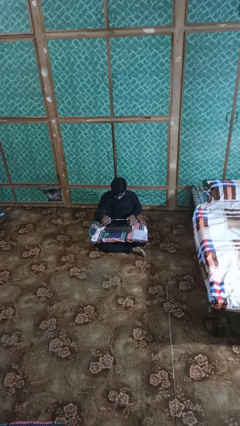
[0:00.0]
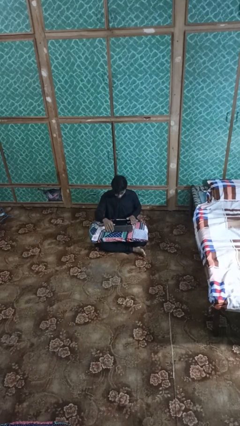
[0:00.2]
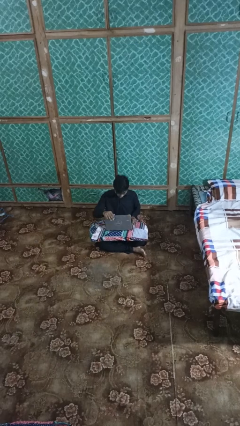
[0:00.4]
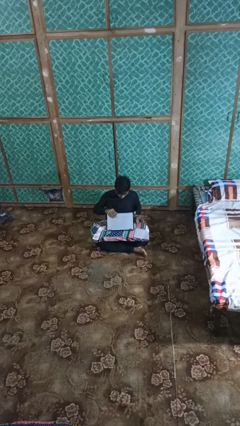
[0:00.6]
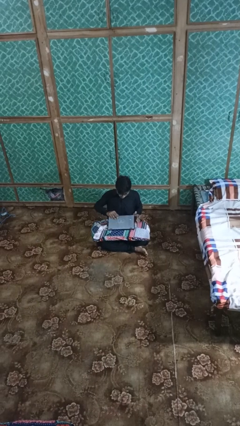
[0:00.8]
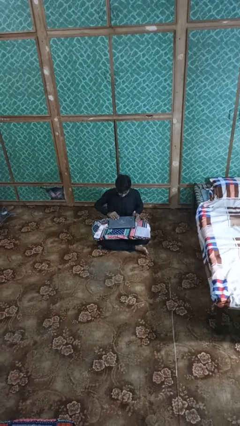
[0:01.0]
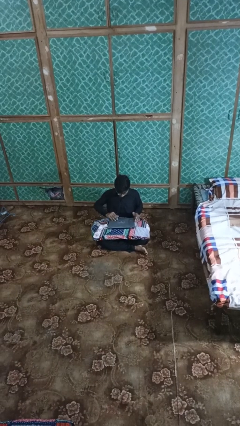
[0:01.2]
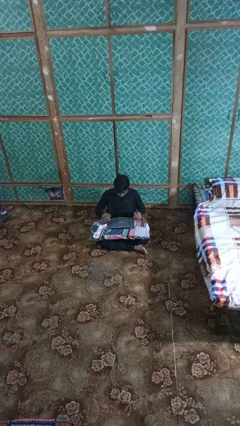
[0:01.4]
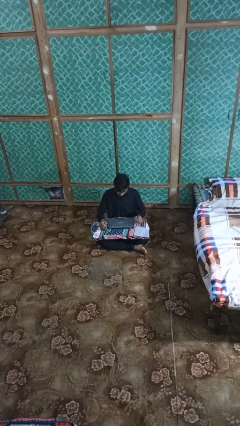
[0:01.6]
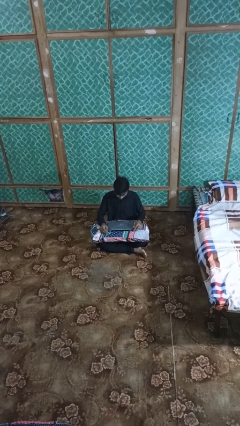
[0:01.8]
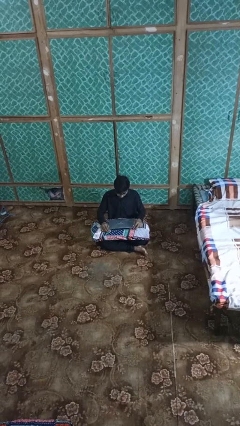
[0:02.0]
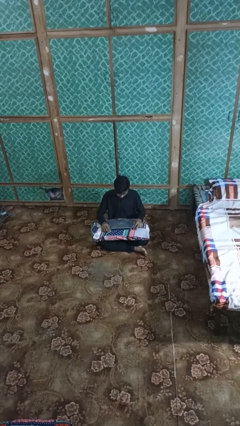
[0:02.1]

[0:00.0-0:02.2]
person closes laptop

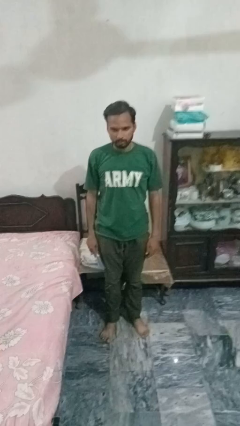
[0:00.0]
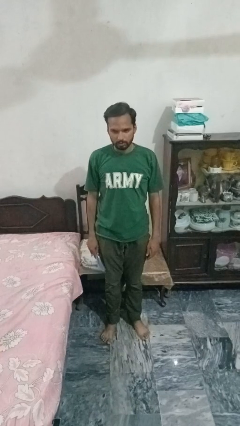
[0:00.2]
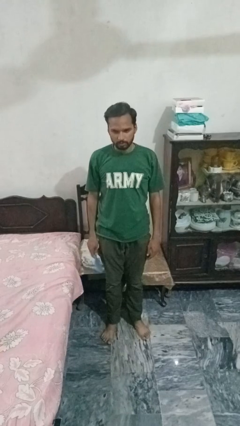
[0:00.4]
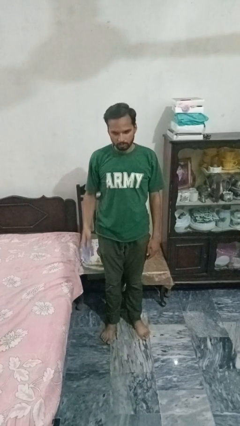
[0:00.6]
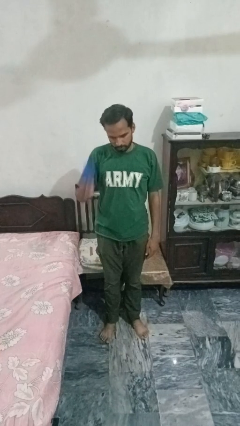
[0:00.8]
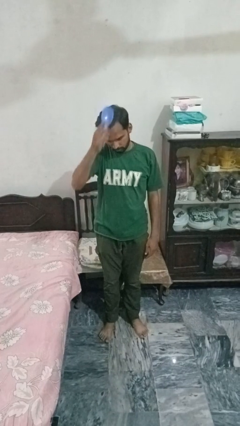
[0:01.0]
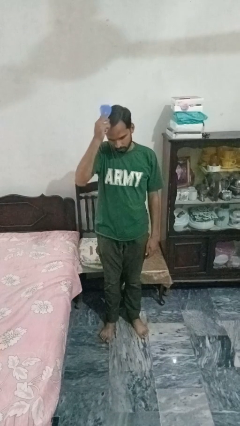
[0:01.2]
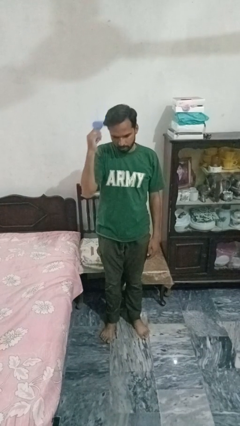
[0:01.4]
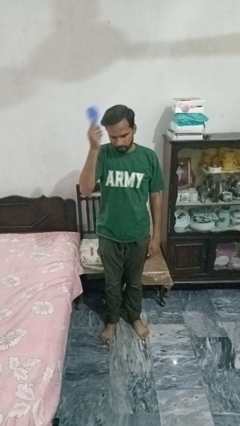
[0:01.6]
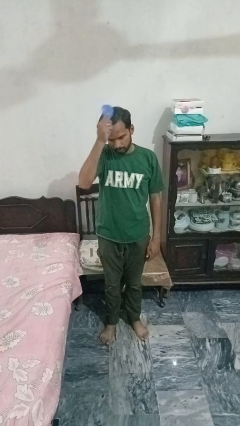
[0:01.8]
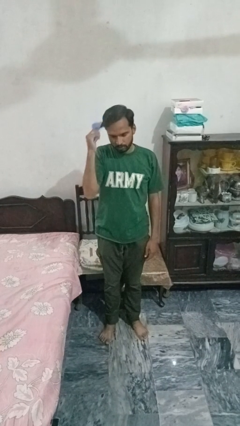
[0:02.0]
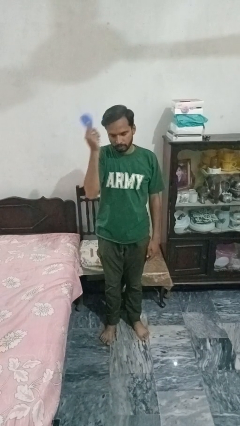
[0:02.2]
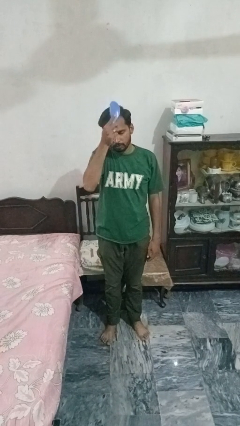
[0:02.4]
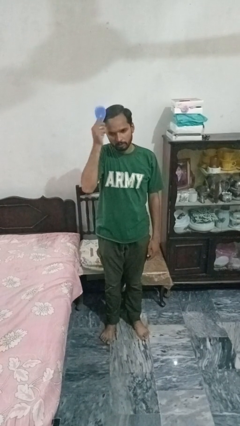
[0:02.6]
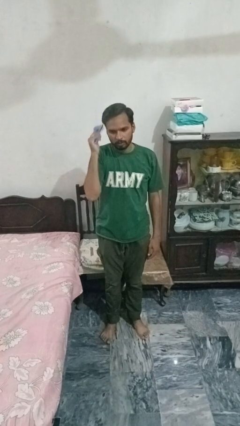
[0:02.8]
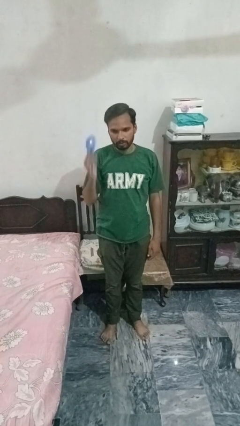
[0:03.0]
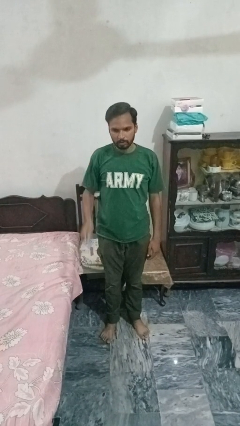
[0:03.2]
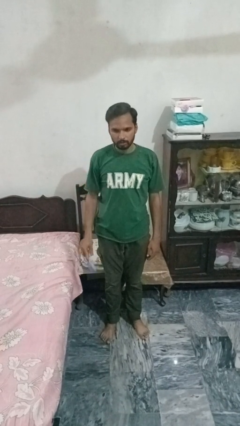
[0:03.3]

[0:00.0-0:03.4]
person brushes hair

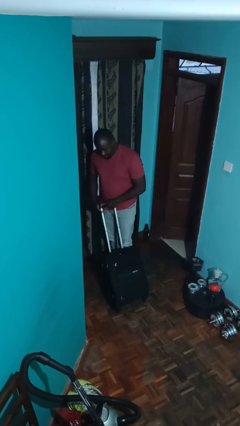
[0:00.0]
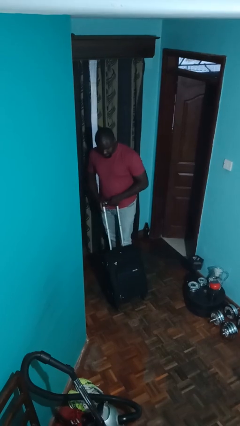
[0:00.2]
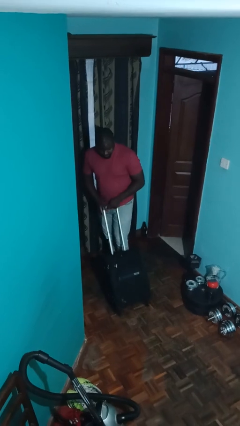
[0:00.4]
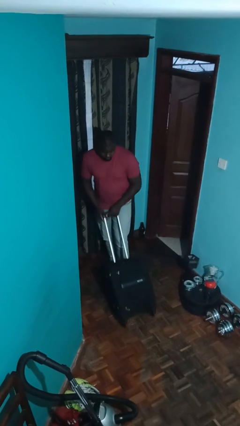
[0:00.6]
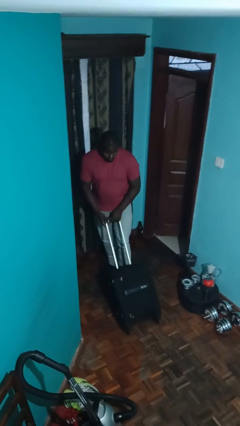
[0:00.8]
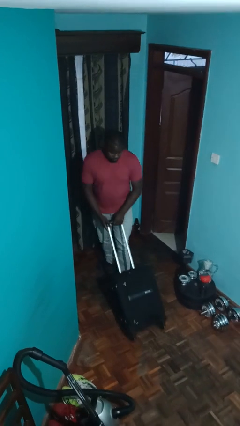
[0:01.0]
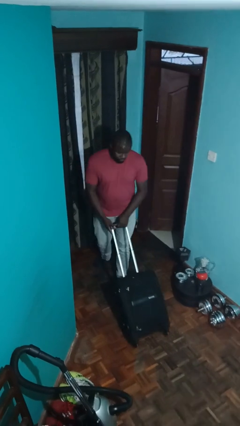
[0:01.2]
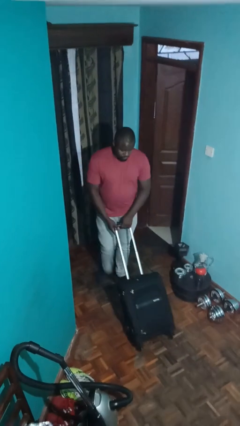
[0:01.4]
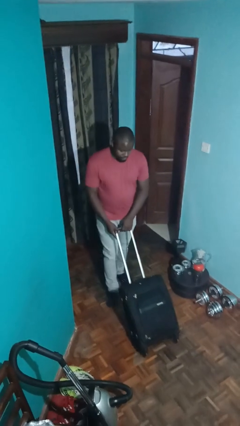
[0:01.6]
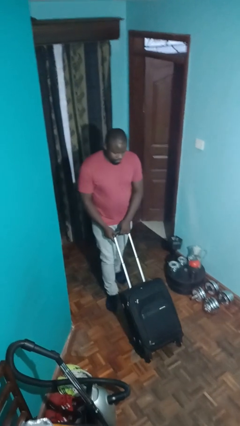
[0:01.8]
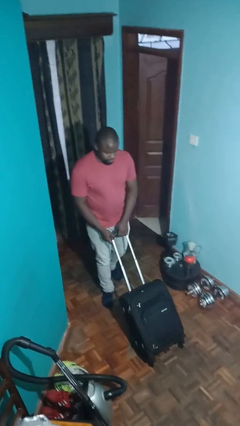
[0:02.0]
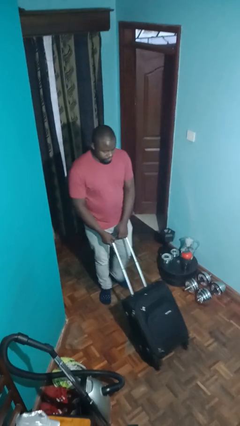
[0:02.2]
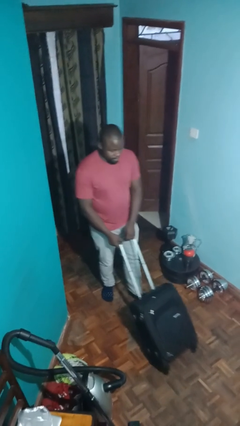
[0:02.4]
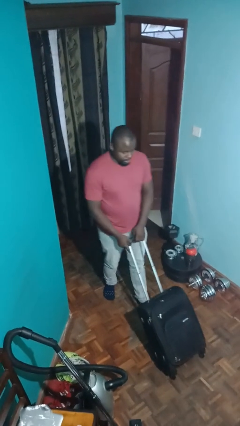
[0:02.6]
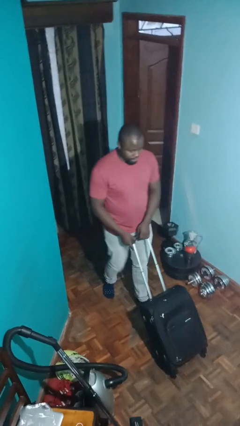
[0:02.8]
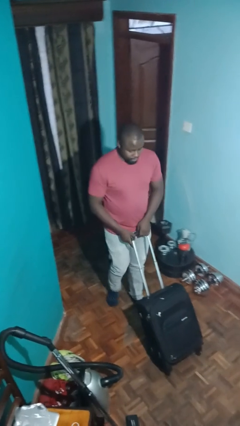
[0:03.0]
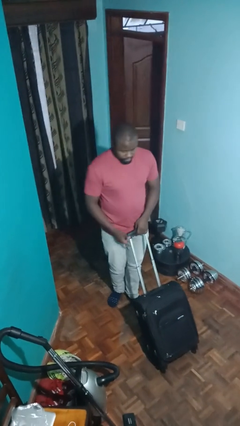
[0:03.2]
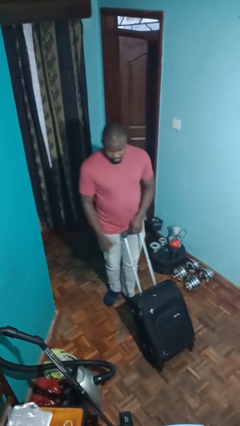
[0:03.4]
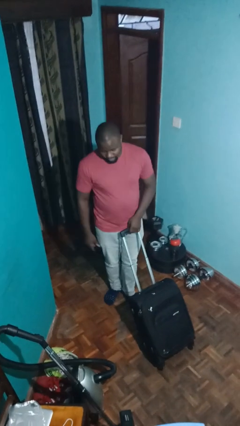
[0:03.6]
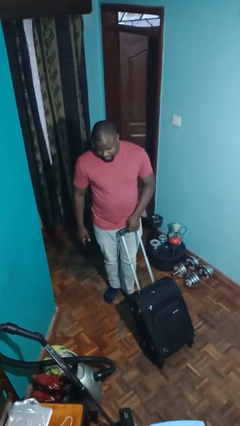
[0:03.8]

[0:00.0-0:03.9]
person pushes wheeled cart

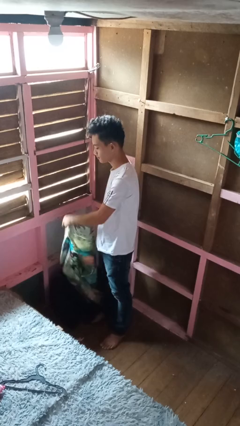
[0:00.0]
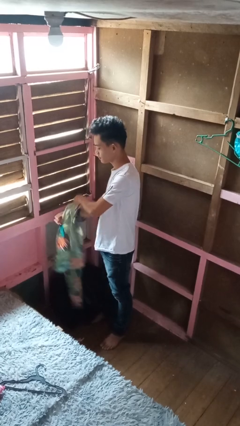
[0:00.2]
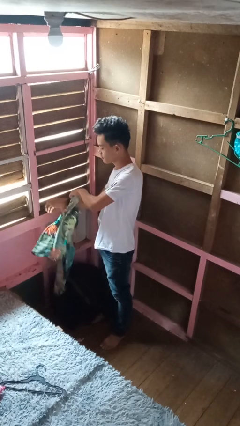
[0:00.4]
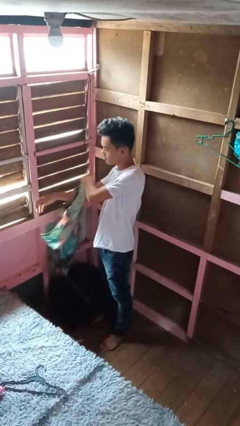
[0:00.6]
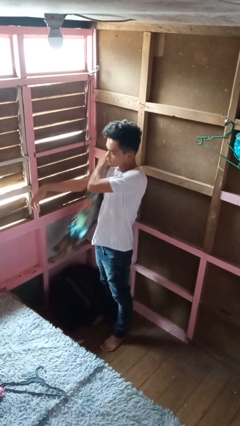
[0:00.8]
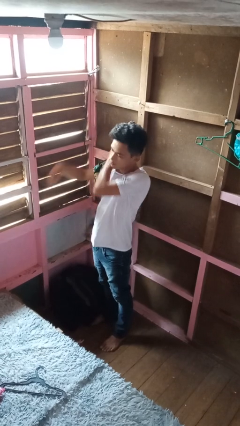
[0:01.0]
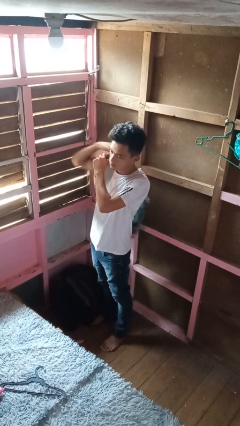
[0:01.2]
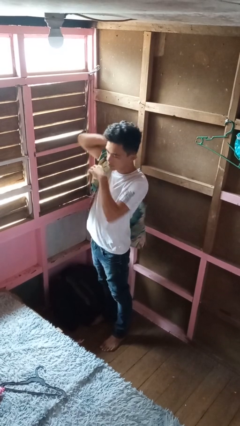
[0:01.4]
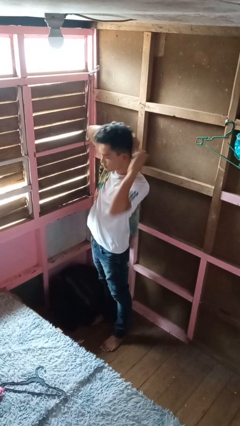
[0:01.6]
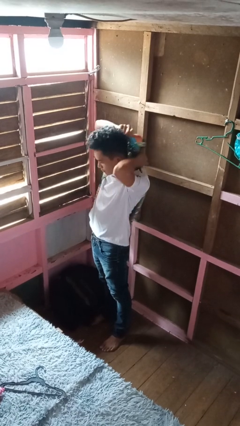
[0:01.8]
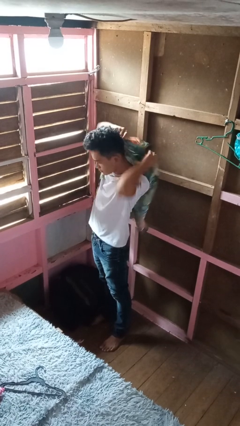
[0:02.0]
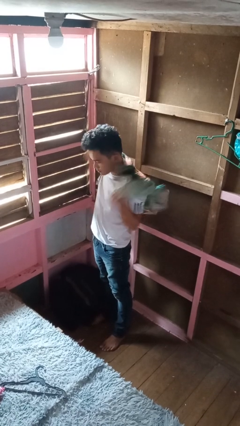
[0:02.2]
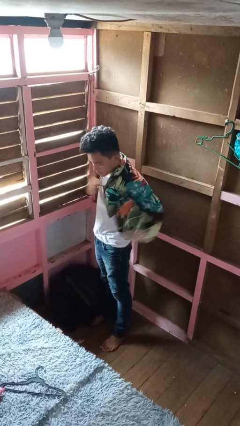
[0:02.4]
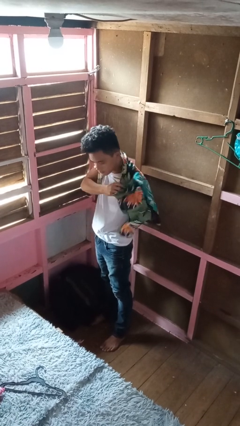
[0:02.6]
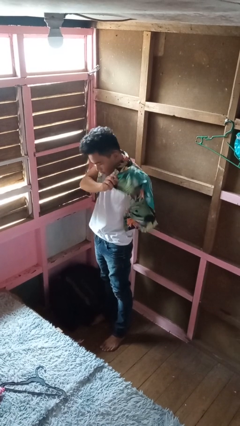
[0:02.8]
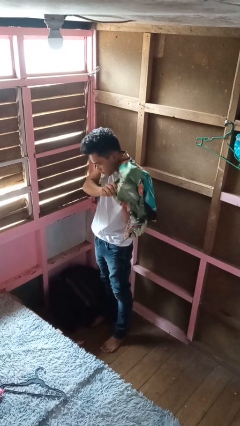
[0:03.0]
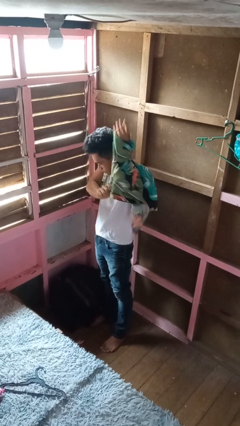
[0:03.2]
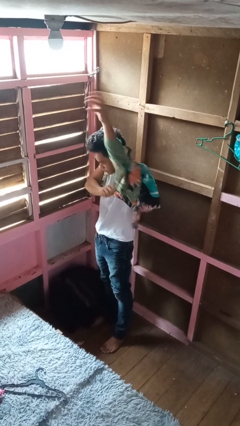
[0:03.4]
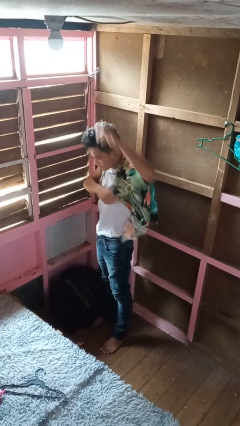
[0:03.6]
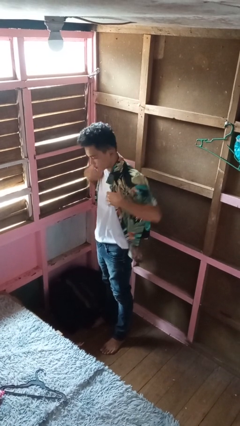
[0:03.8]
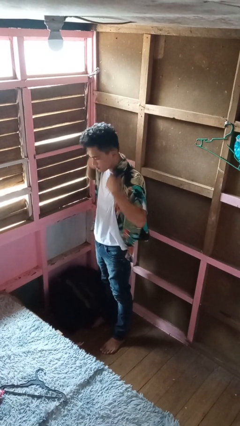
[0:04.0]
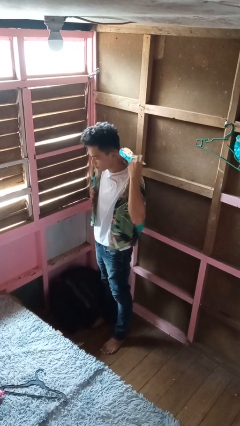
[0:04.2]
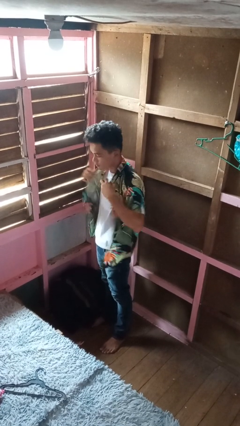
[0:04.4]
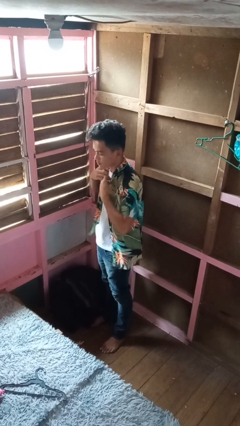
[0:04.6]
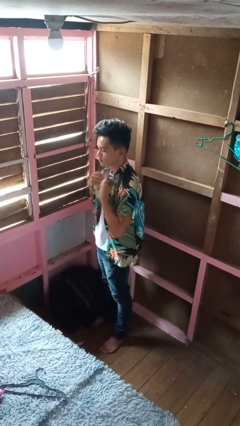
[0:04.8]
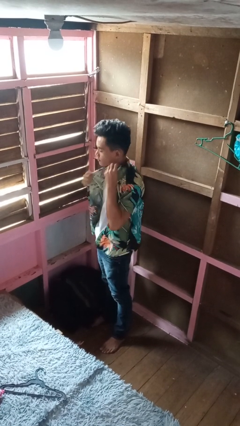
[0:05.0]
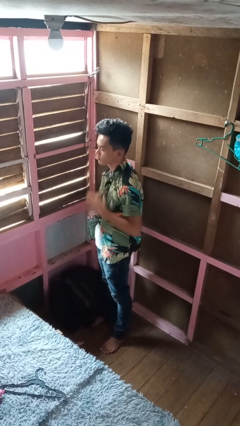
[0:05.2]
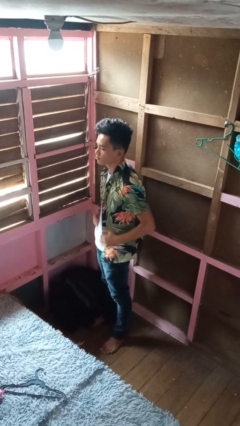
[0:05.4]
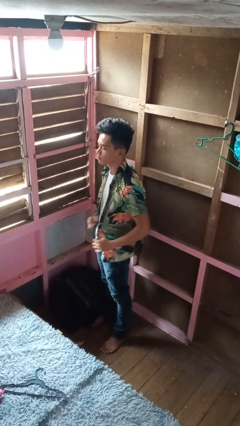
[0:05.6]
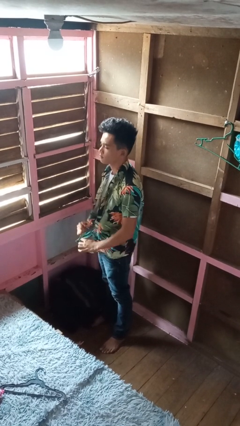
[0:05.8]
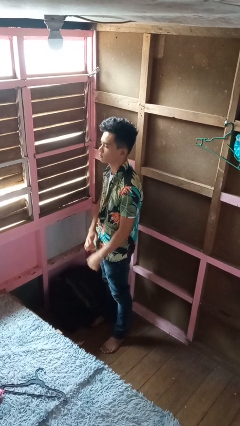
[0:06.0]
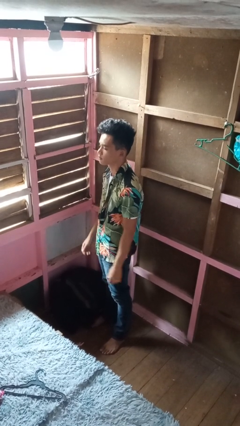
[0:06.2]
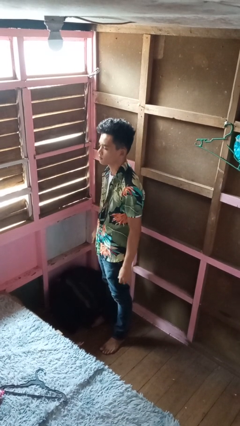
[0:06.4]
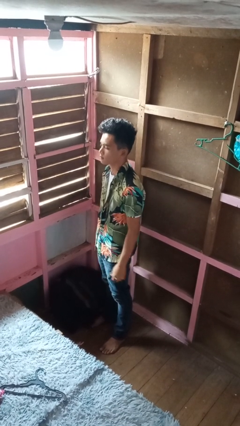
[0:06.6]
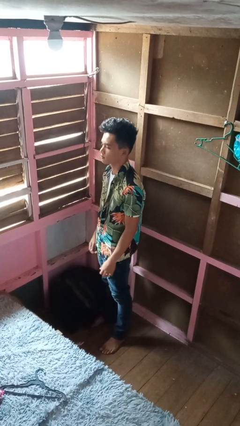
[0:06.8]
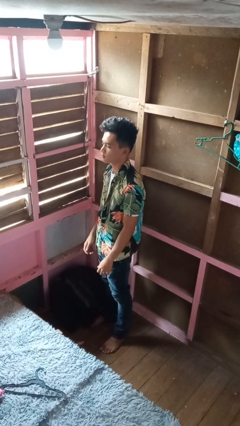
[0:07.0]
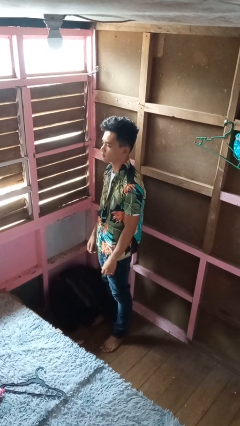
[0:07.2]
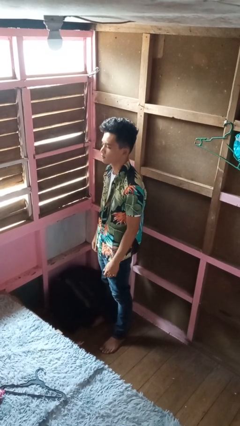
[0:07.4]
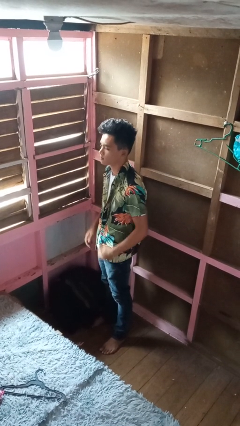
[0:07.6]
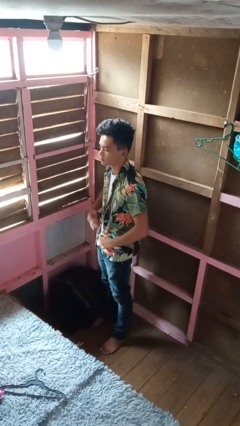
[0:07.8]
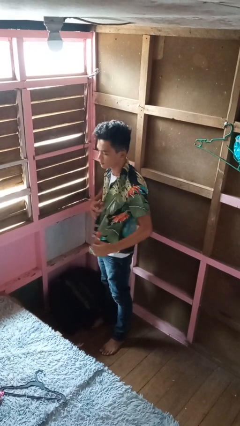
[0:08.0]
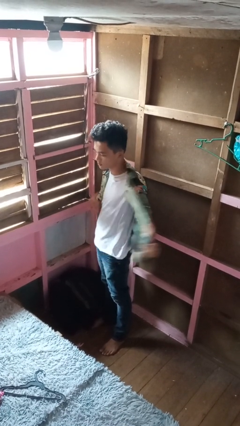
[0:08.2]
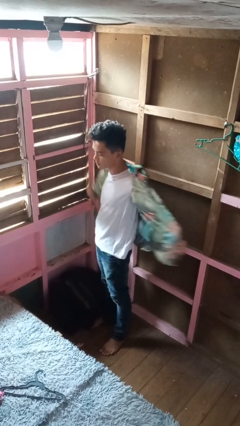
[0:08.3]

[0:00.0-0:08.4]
person puts on shirt
